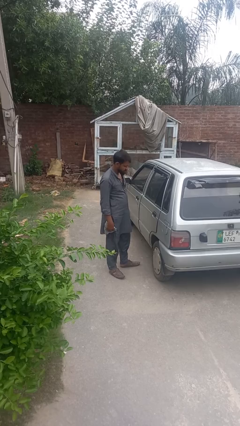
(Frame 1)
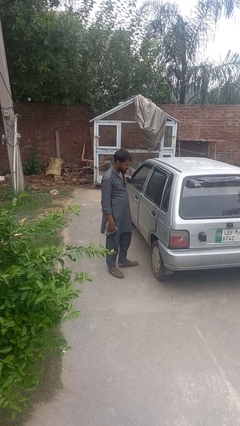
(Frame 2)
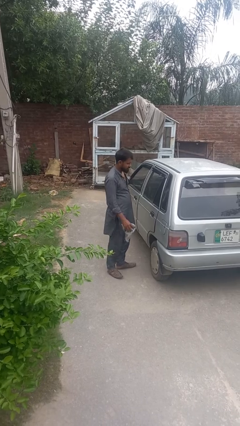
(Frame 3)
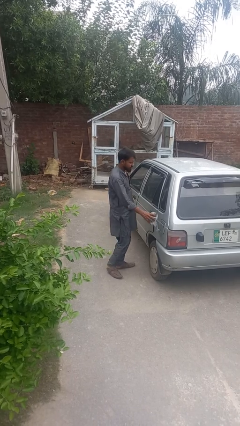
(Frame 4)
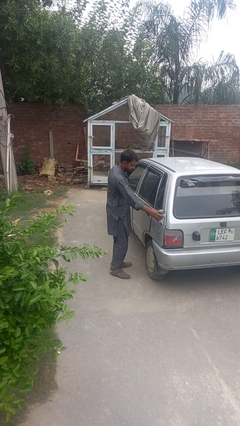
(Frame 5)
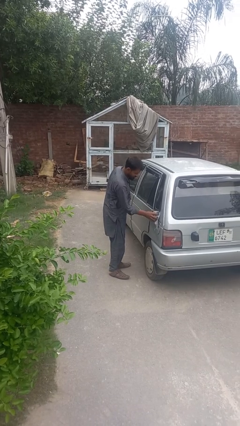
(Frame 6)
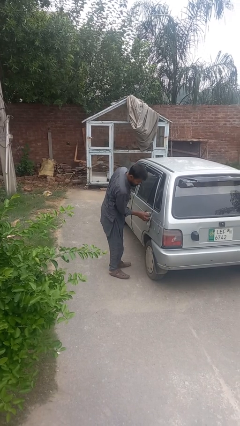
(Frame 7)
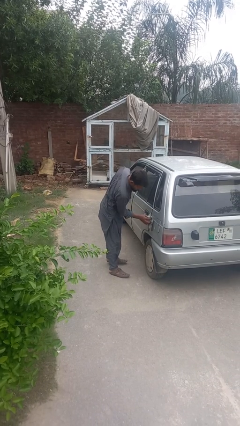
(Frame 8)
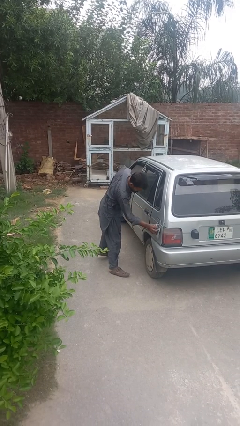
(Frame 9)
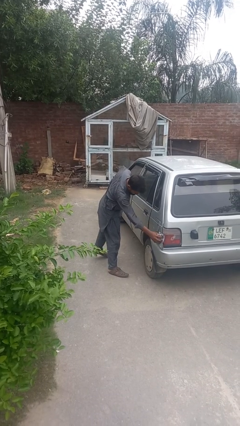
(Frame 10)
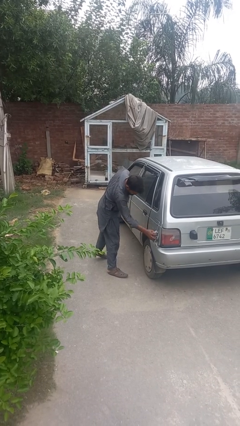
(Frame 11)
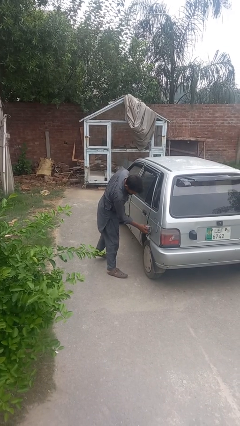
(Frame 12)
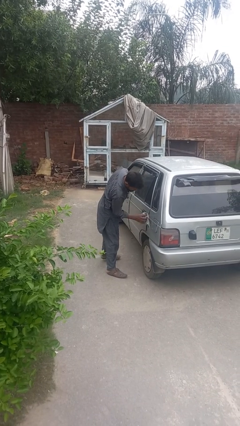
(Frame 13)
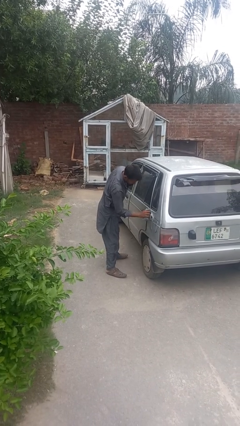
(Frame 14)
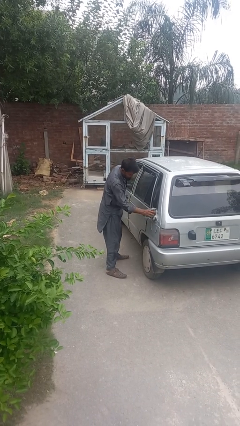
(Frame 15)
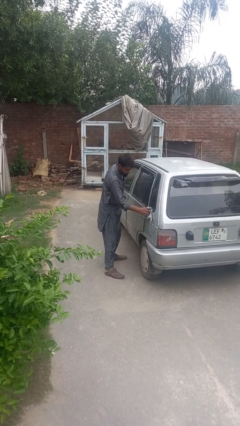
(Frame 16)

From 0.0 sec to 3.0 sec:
person polishes car with rag

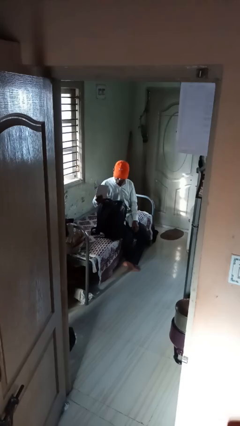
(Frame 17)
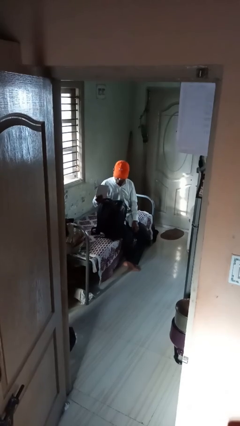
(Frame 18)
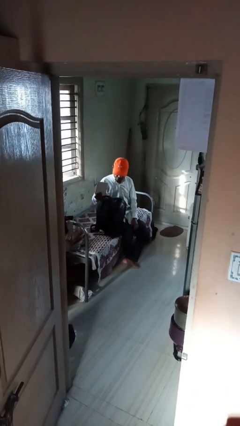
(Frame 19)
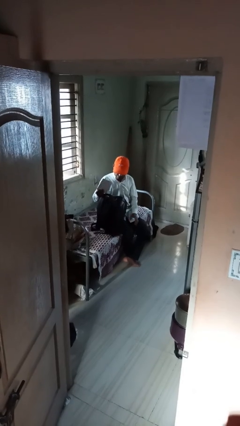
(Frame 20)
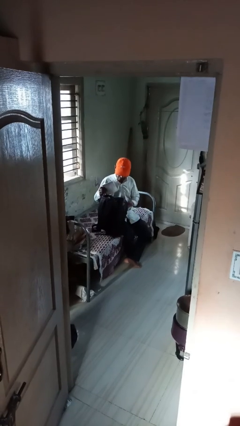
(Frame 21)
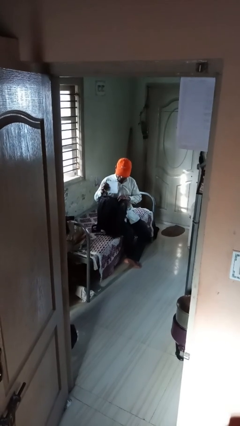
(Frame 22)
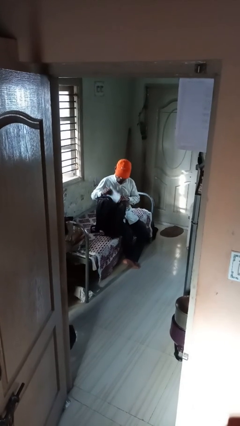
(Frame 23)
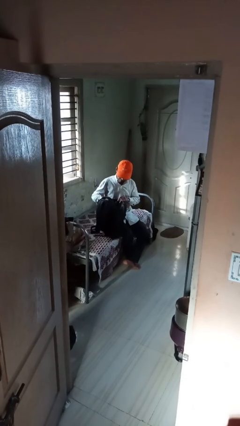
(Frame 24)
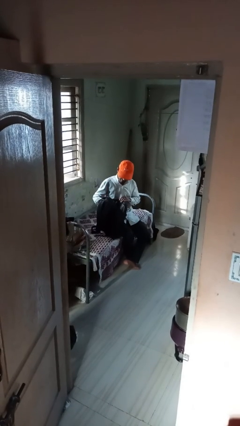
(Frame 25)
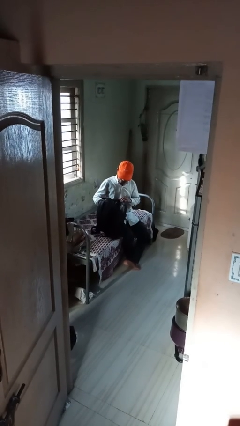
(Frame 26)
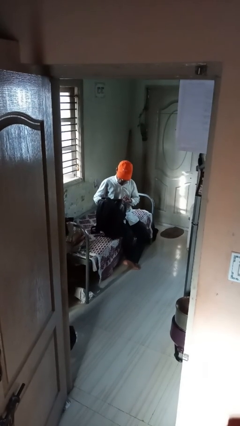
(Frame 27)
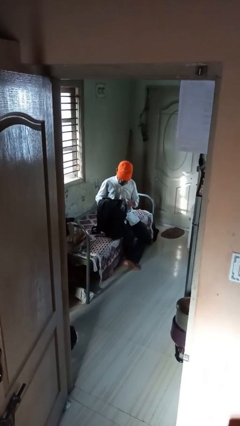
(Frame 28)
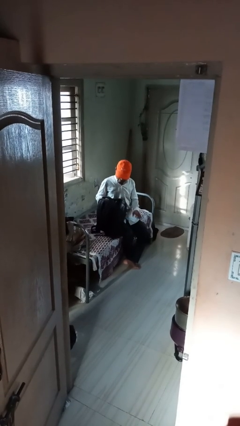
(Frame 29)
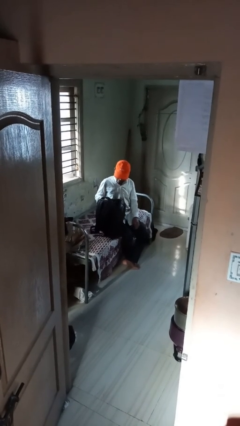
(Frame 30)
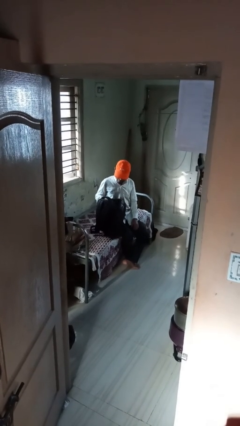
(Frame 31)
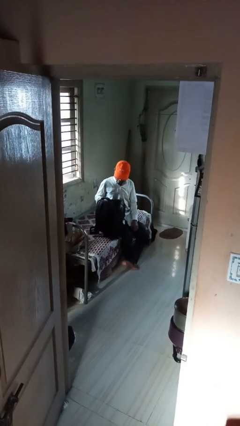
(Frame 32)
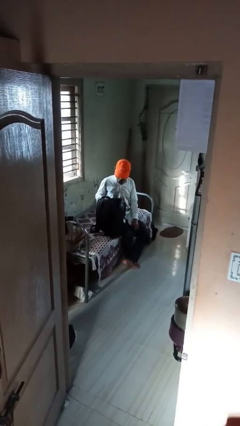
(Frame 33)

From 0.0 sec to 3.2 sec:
person puts object into backpack

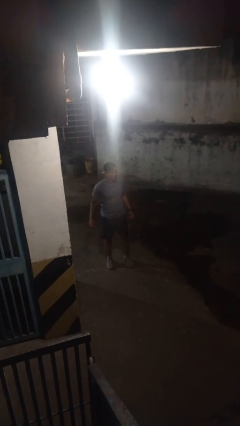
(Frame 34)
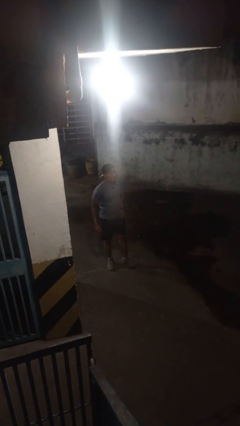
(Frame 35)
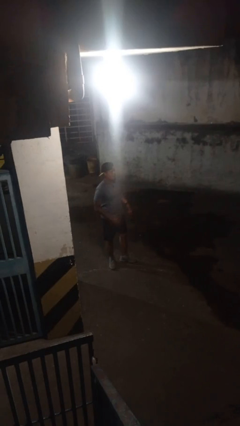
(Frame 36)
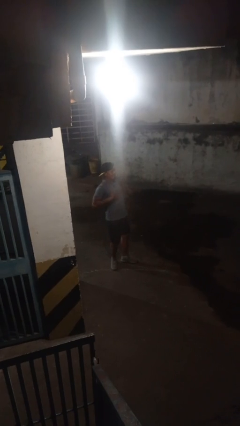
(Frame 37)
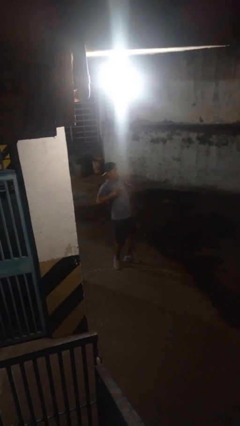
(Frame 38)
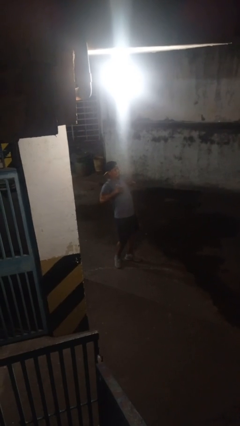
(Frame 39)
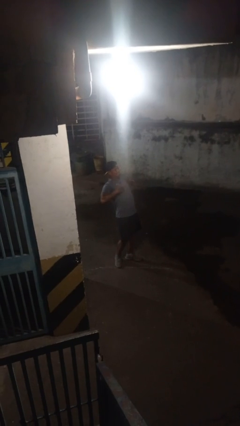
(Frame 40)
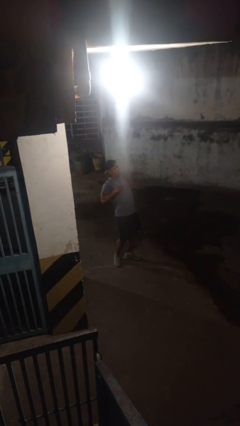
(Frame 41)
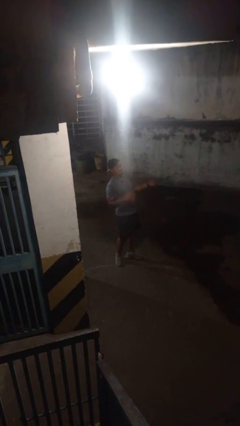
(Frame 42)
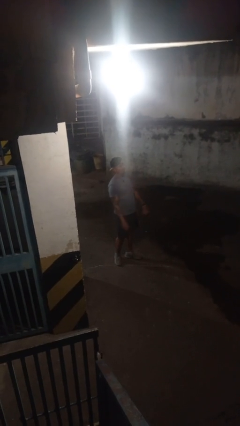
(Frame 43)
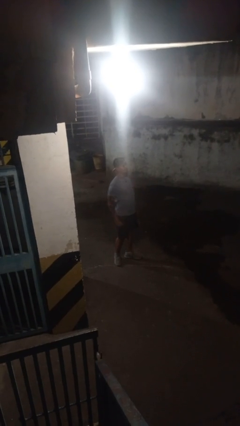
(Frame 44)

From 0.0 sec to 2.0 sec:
person drums on chest

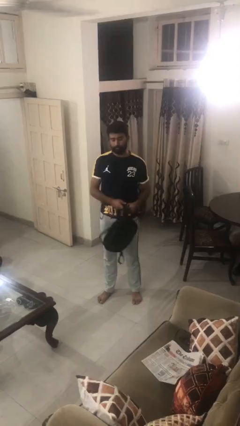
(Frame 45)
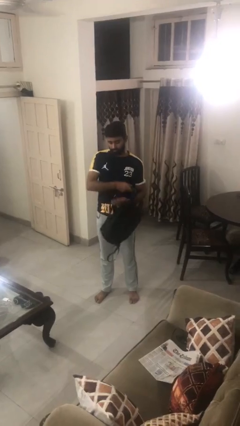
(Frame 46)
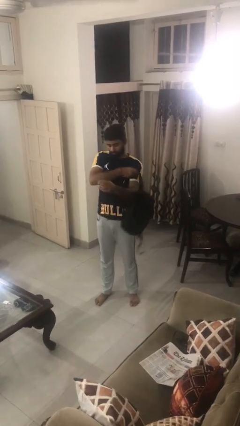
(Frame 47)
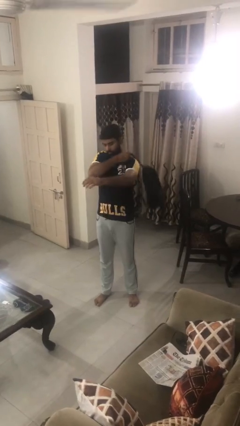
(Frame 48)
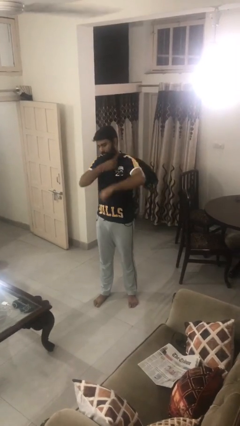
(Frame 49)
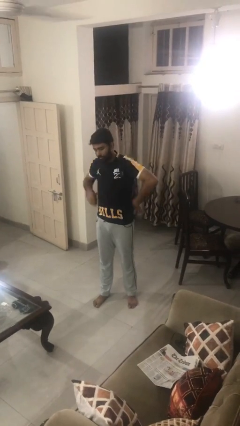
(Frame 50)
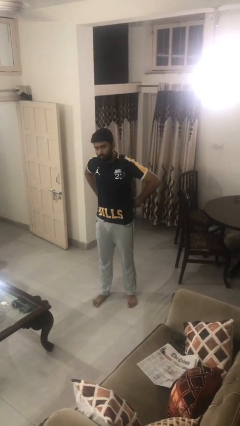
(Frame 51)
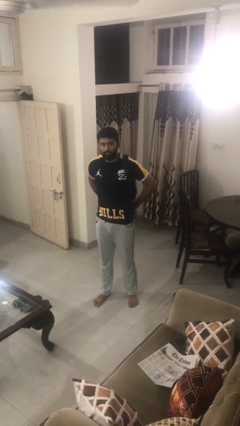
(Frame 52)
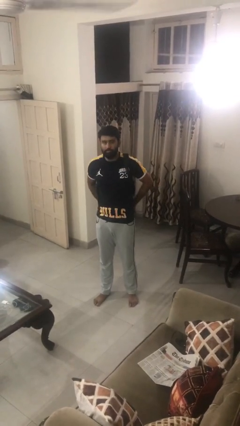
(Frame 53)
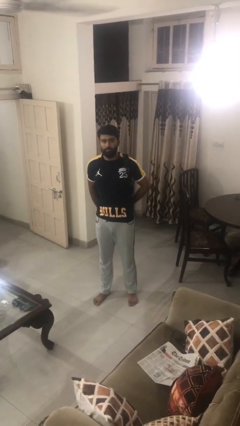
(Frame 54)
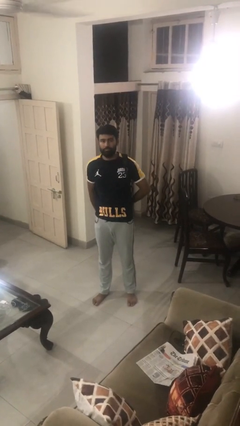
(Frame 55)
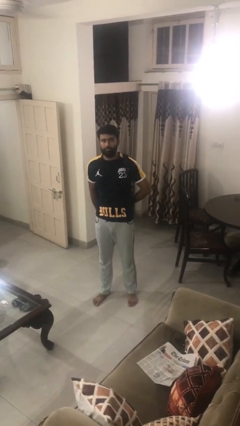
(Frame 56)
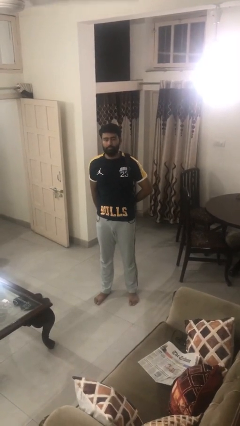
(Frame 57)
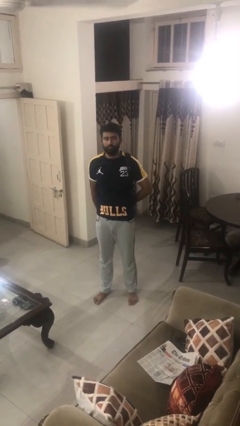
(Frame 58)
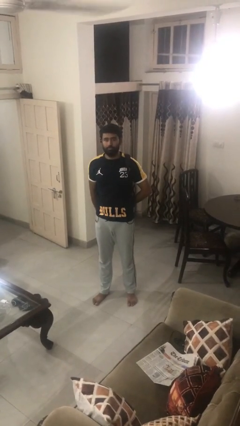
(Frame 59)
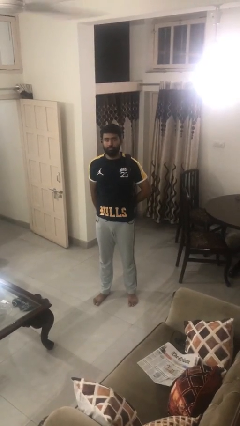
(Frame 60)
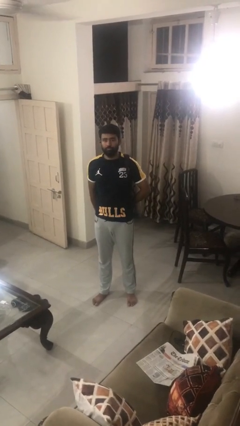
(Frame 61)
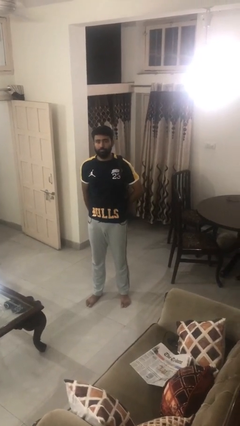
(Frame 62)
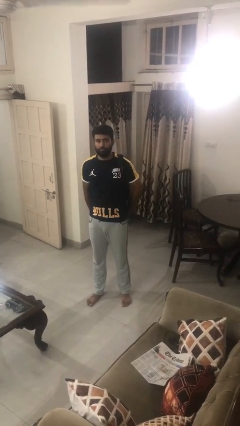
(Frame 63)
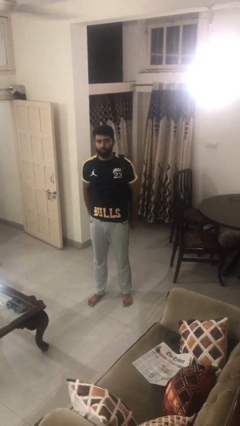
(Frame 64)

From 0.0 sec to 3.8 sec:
person puts on backpack

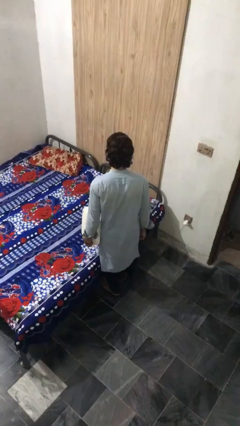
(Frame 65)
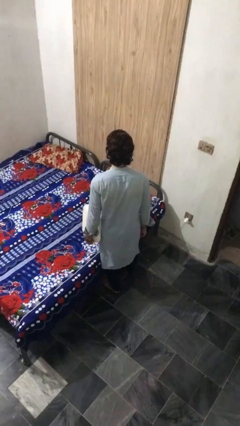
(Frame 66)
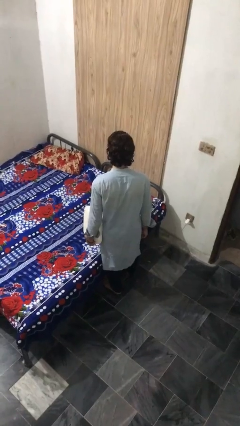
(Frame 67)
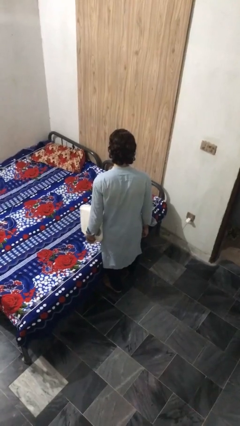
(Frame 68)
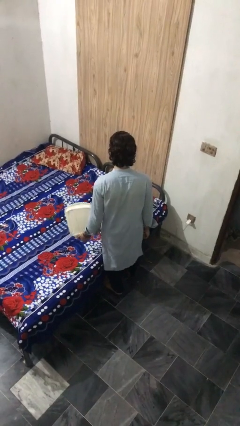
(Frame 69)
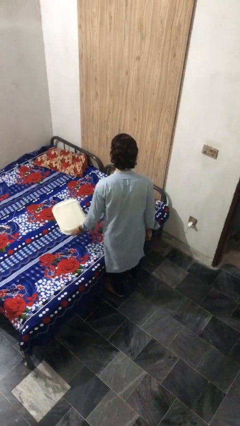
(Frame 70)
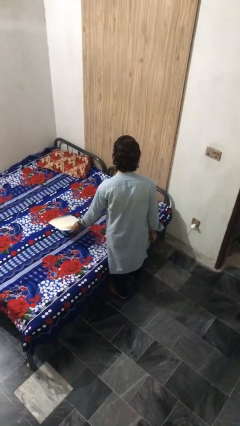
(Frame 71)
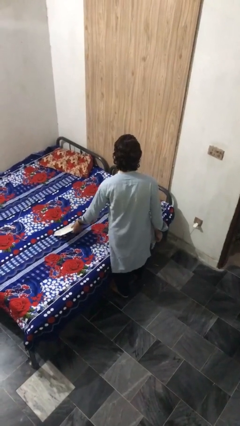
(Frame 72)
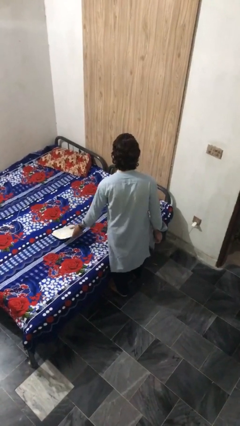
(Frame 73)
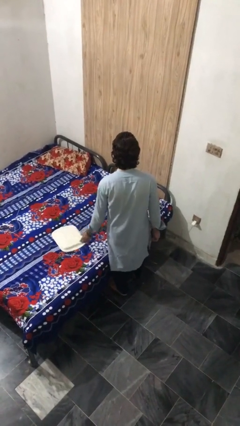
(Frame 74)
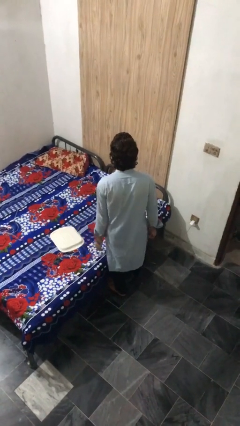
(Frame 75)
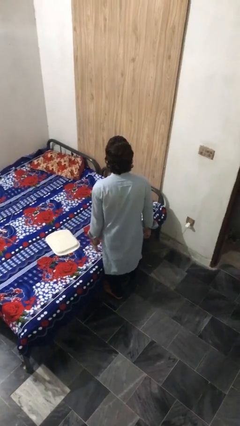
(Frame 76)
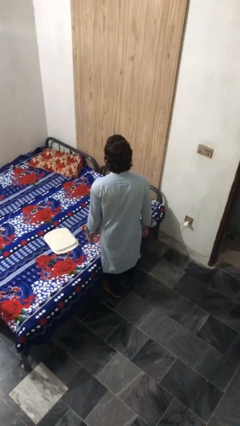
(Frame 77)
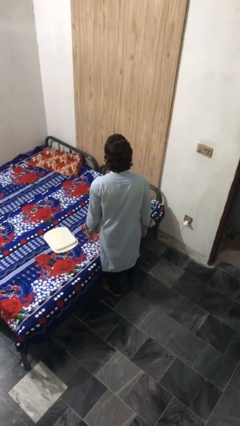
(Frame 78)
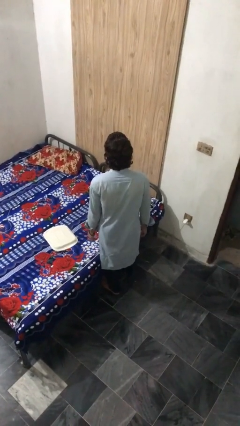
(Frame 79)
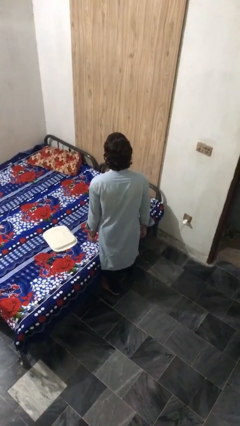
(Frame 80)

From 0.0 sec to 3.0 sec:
person puts down object on bed

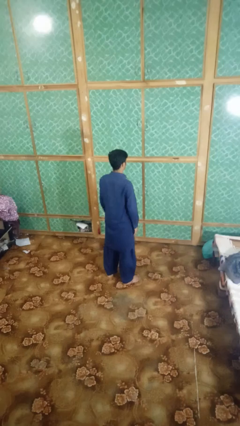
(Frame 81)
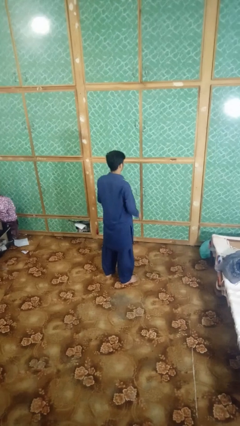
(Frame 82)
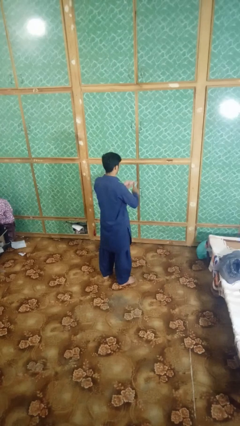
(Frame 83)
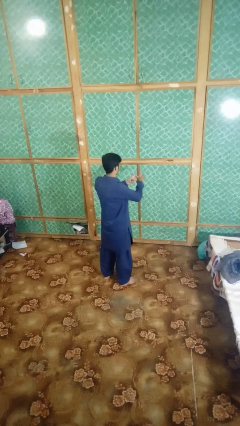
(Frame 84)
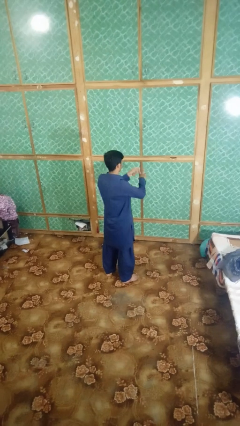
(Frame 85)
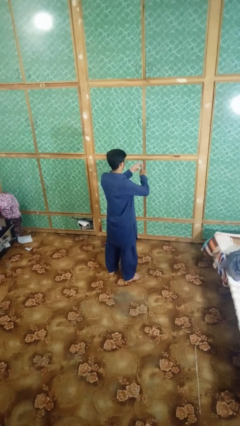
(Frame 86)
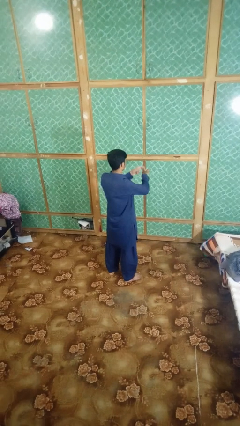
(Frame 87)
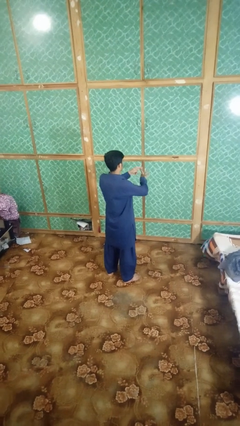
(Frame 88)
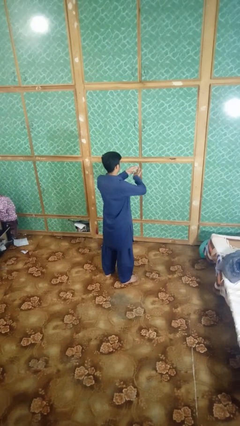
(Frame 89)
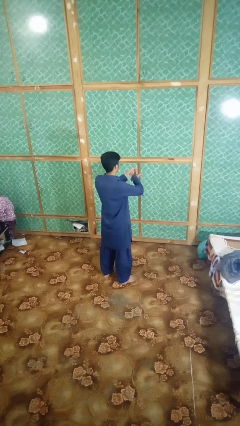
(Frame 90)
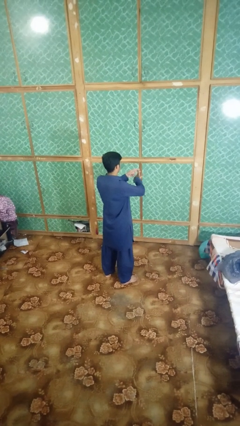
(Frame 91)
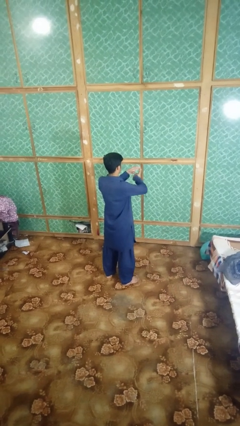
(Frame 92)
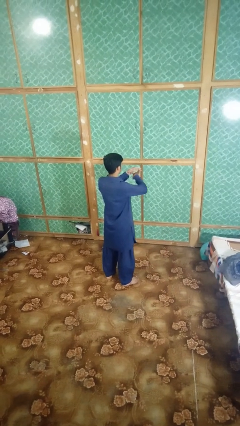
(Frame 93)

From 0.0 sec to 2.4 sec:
person snaps fingers
